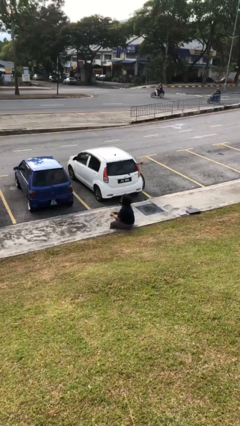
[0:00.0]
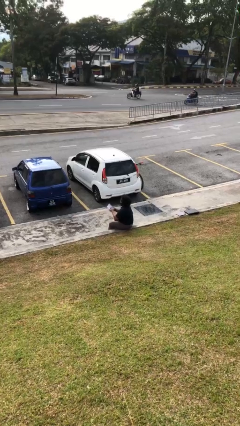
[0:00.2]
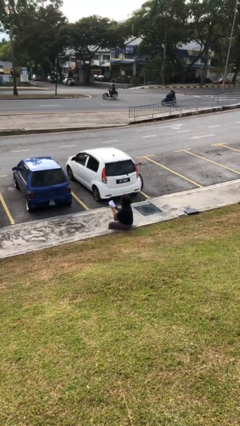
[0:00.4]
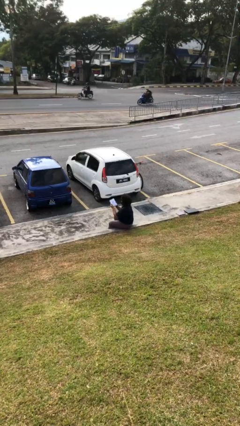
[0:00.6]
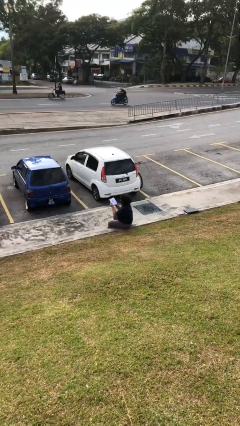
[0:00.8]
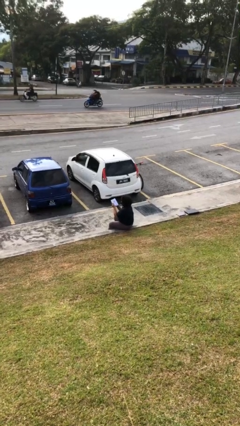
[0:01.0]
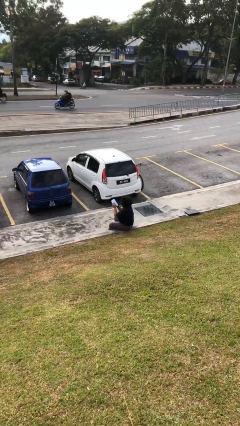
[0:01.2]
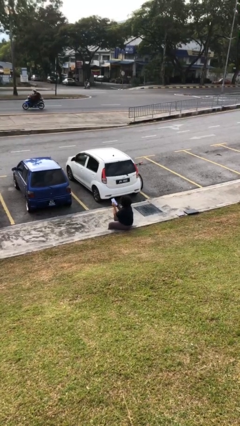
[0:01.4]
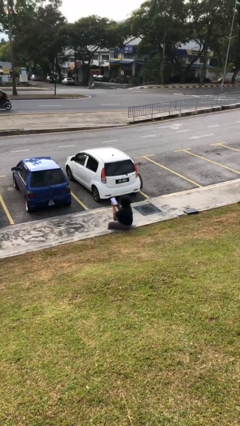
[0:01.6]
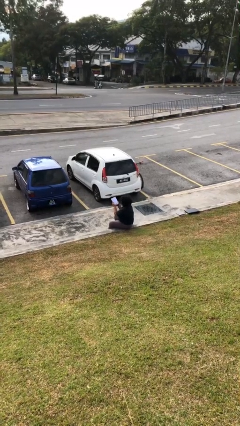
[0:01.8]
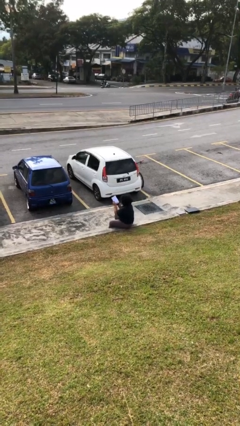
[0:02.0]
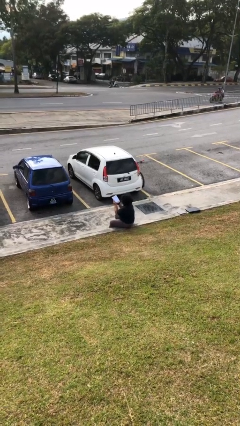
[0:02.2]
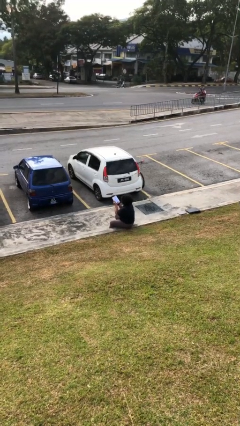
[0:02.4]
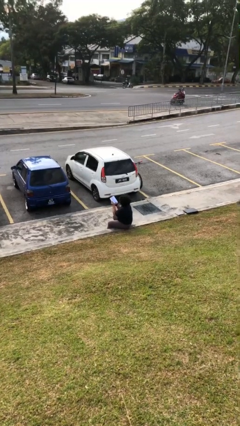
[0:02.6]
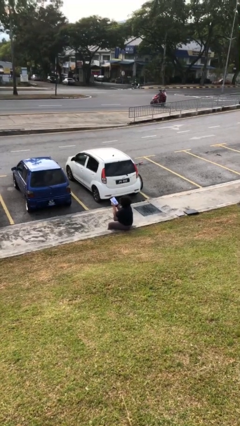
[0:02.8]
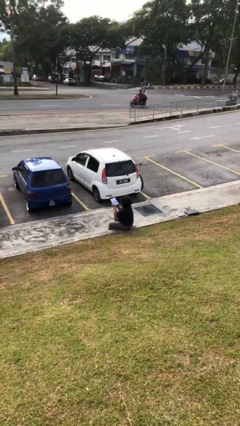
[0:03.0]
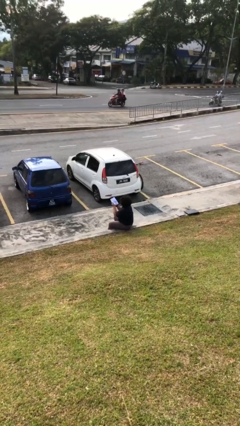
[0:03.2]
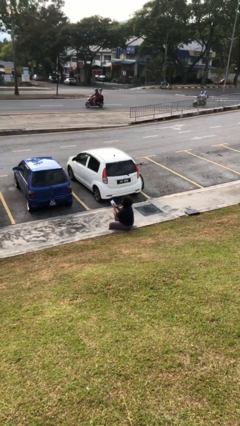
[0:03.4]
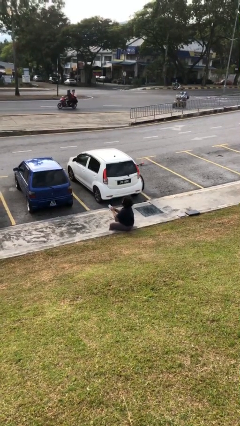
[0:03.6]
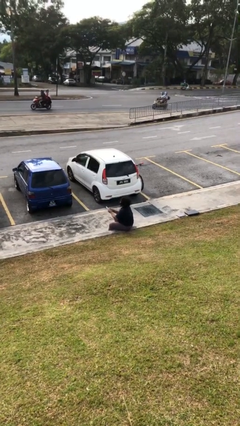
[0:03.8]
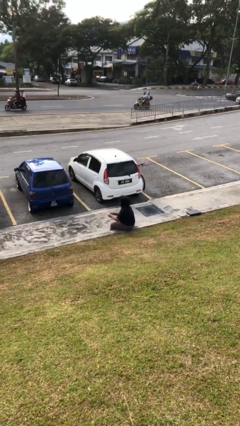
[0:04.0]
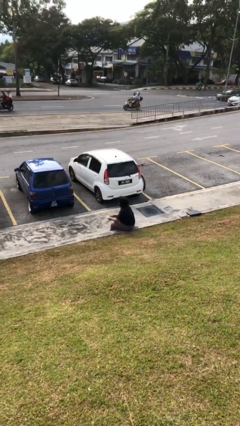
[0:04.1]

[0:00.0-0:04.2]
person reads document

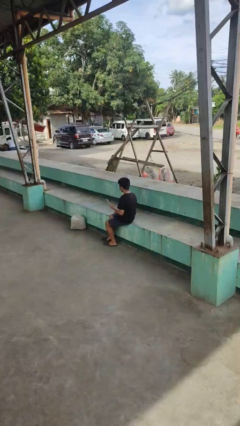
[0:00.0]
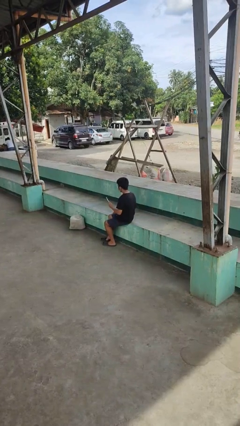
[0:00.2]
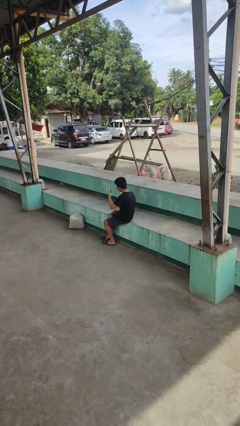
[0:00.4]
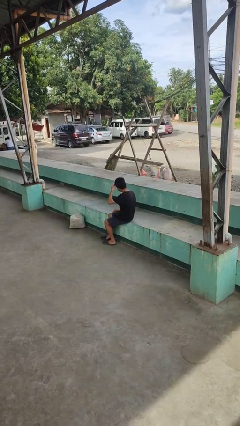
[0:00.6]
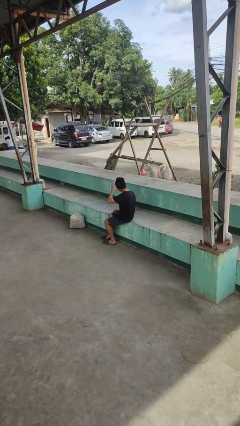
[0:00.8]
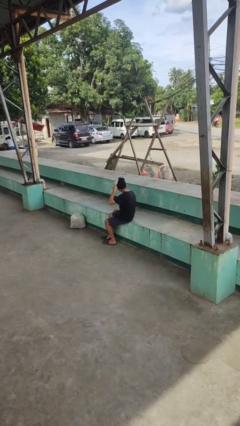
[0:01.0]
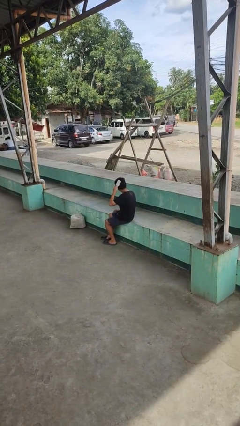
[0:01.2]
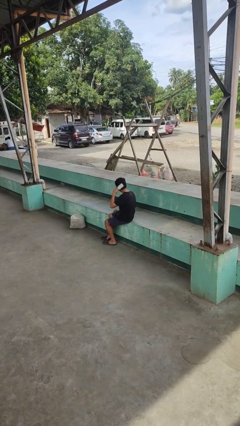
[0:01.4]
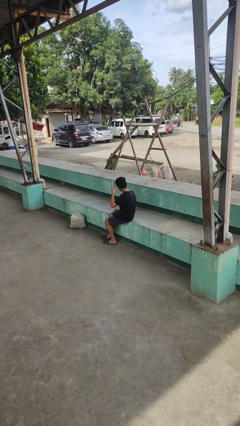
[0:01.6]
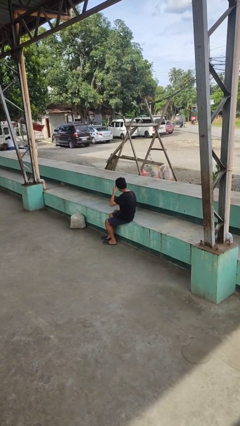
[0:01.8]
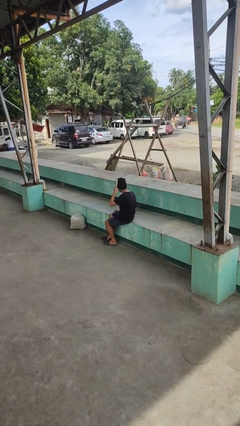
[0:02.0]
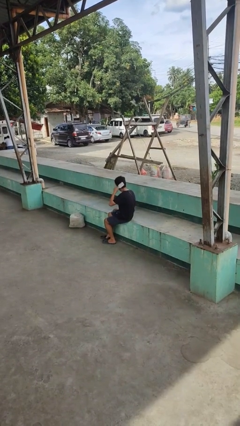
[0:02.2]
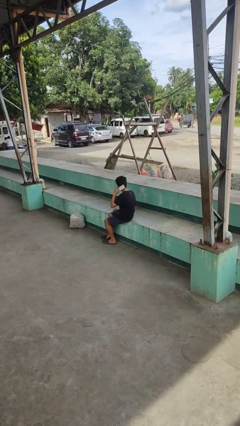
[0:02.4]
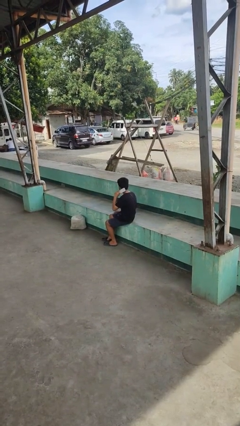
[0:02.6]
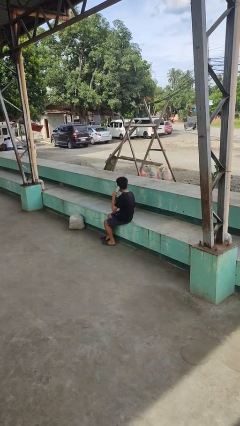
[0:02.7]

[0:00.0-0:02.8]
person brushes hair

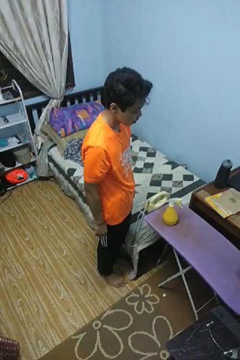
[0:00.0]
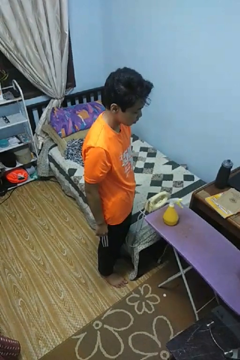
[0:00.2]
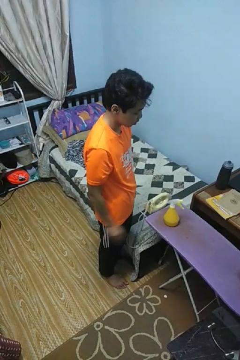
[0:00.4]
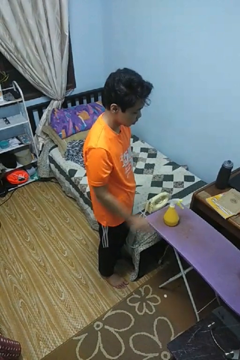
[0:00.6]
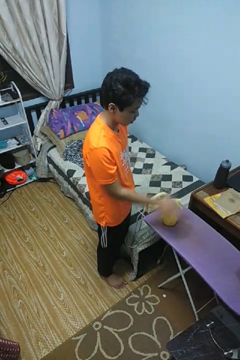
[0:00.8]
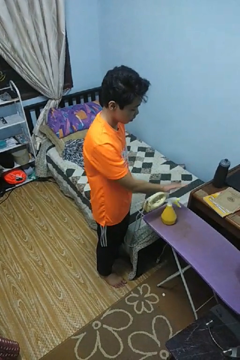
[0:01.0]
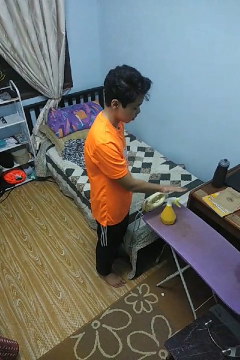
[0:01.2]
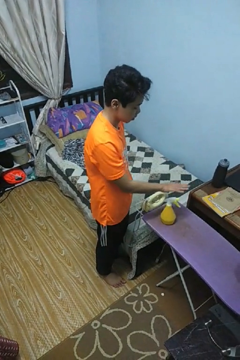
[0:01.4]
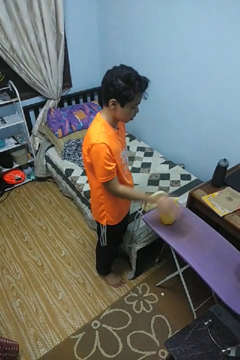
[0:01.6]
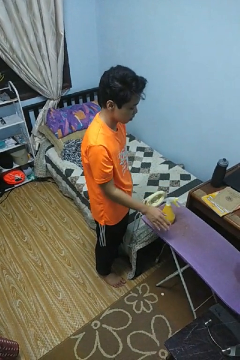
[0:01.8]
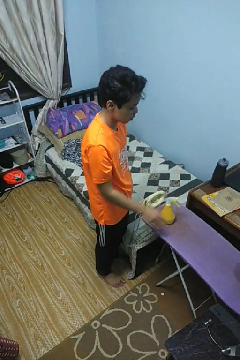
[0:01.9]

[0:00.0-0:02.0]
person waves hand over object

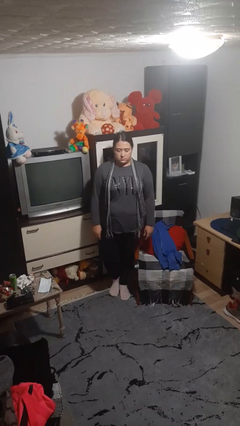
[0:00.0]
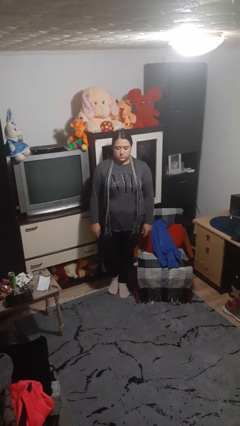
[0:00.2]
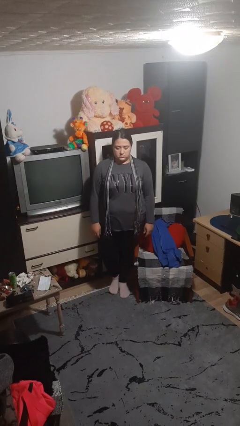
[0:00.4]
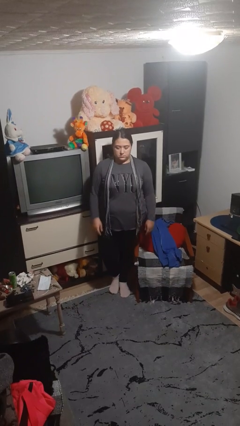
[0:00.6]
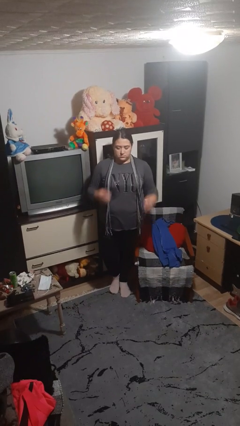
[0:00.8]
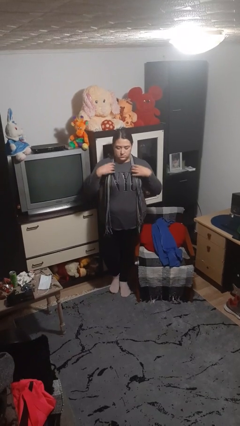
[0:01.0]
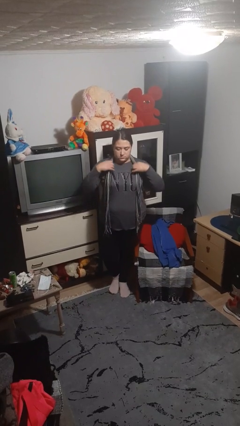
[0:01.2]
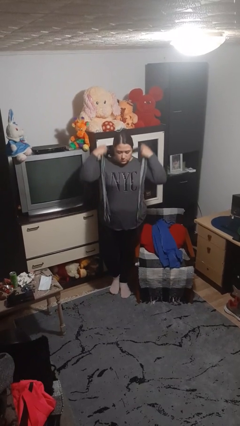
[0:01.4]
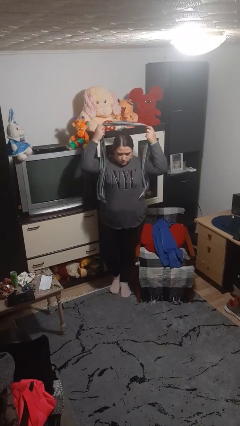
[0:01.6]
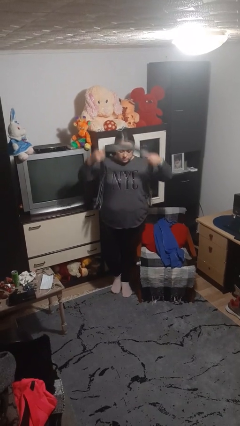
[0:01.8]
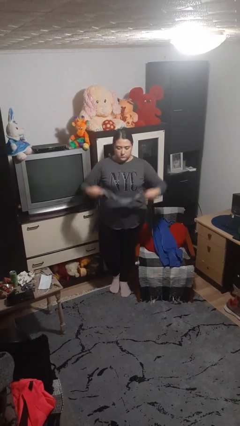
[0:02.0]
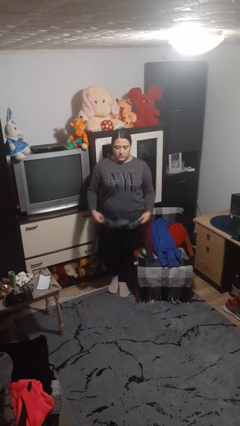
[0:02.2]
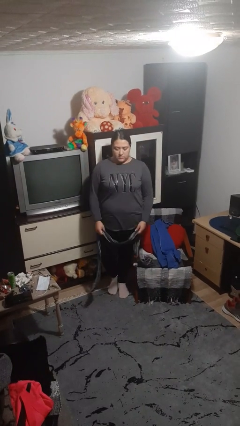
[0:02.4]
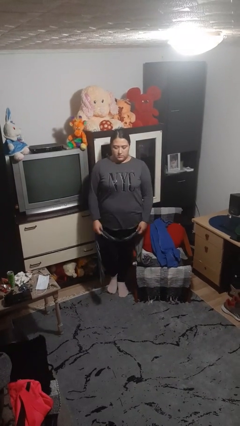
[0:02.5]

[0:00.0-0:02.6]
person takes off scarf

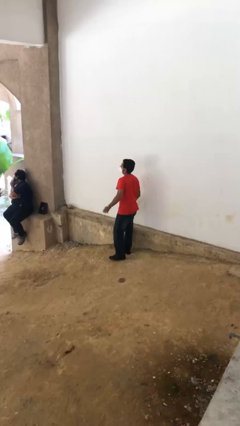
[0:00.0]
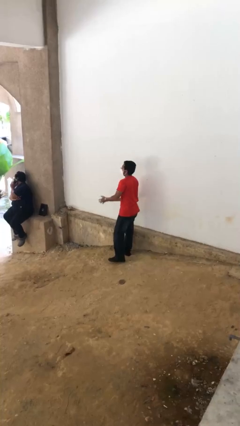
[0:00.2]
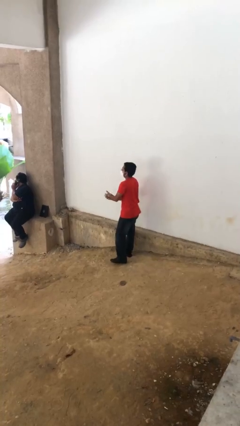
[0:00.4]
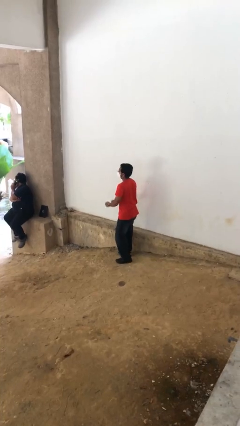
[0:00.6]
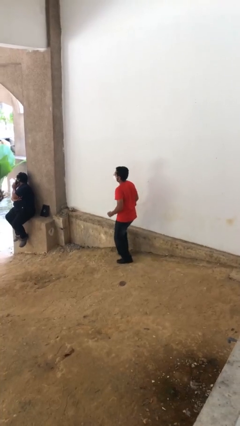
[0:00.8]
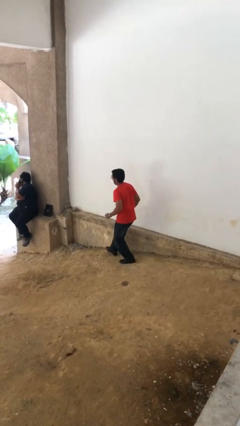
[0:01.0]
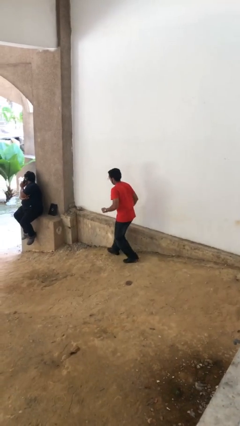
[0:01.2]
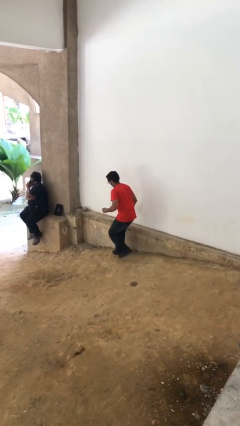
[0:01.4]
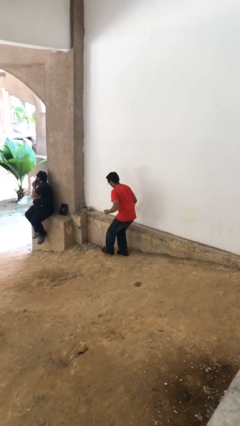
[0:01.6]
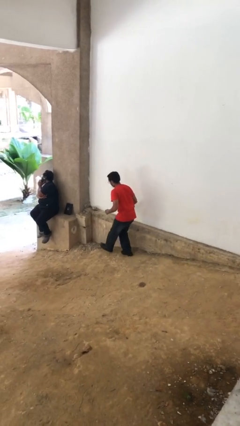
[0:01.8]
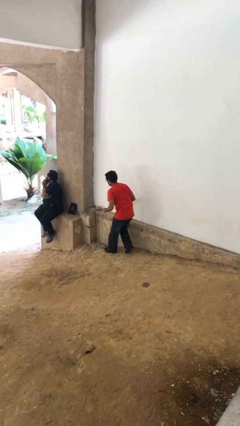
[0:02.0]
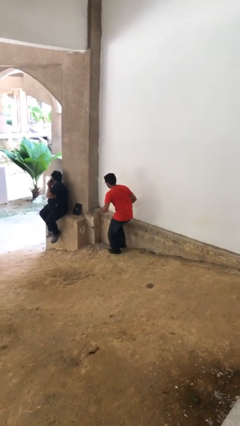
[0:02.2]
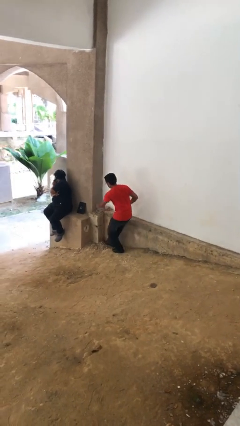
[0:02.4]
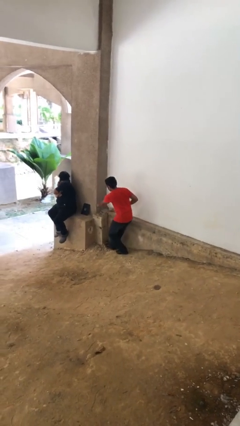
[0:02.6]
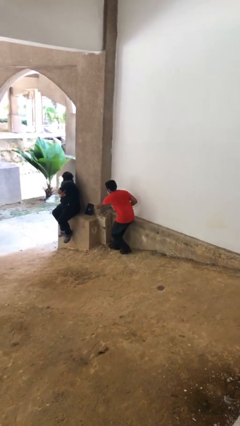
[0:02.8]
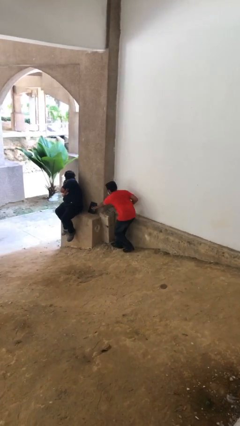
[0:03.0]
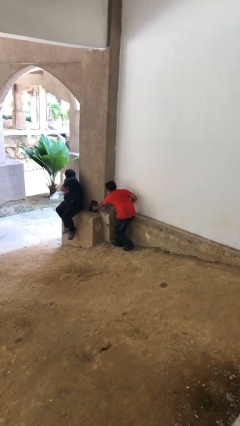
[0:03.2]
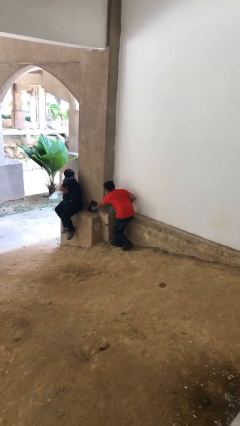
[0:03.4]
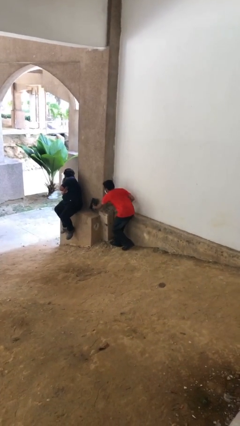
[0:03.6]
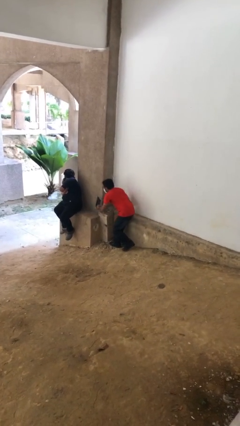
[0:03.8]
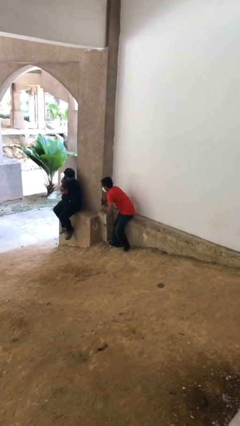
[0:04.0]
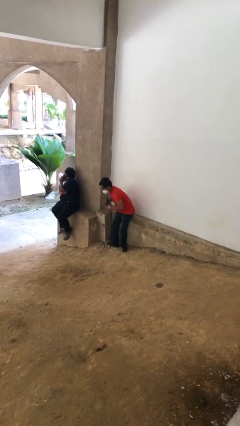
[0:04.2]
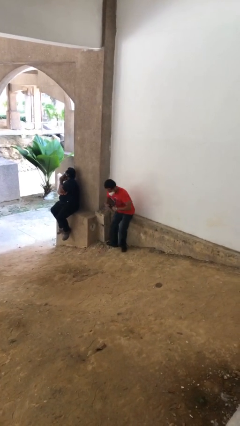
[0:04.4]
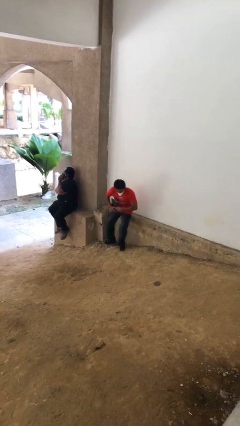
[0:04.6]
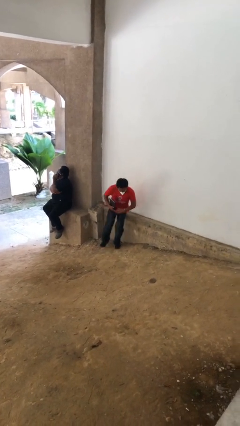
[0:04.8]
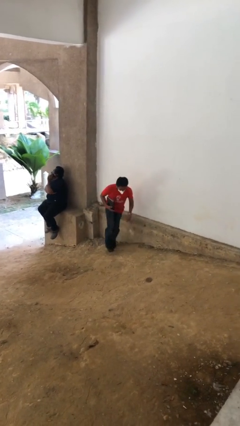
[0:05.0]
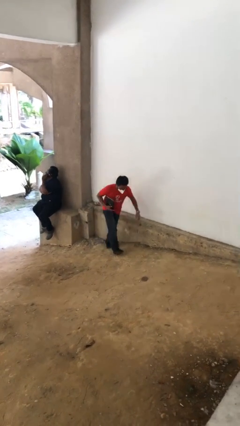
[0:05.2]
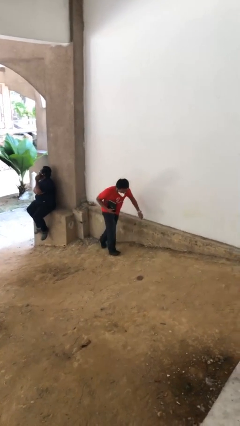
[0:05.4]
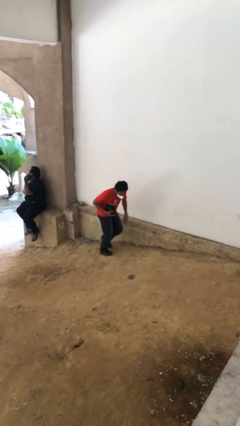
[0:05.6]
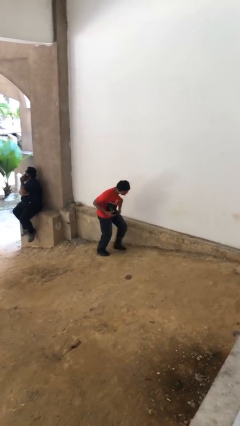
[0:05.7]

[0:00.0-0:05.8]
person steals object from person

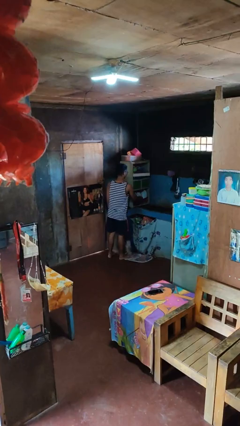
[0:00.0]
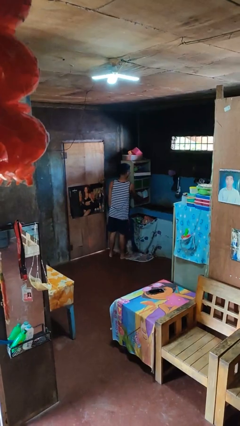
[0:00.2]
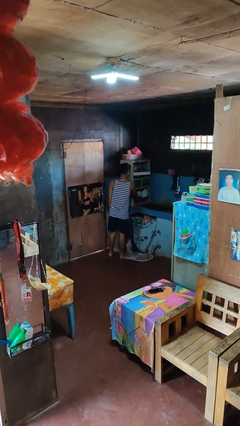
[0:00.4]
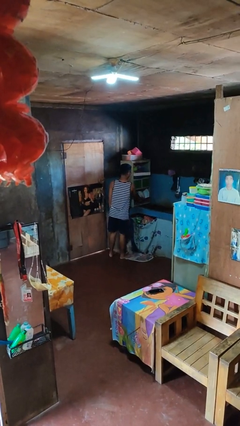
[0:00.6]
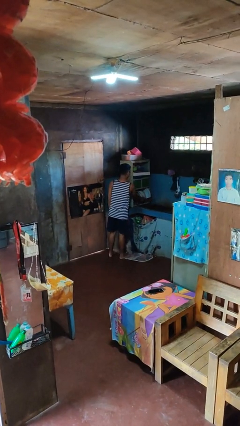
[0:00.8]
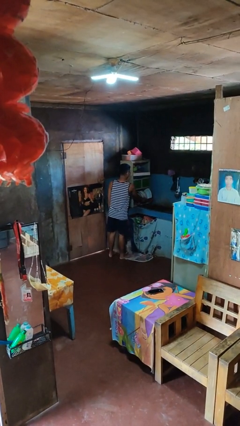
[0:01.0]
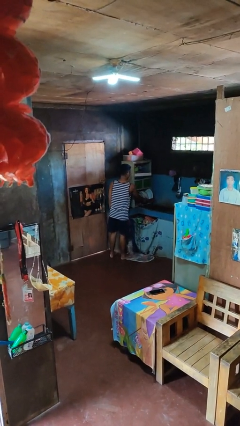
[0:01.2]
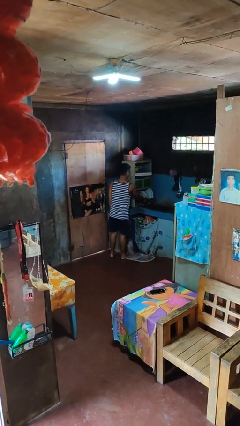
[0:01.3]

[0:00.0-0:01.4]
person opens dishwasher
